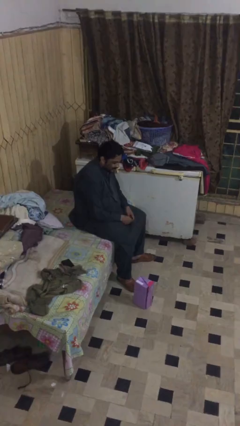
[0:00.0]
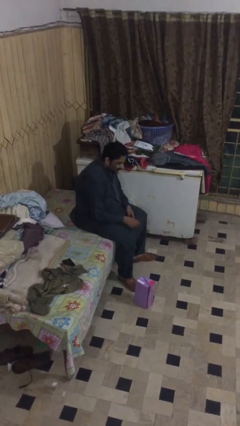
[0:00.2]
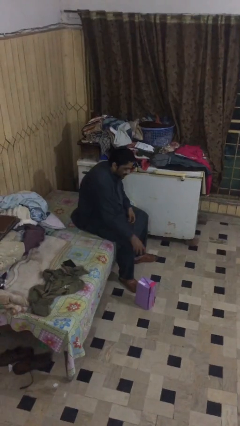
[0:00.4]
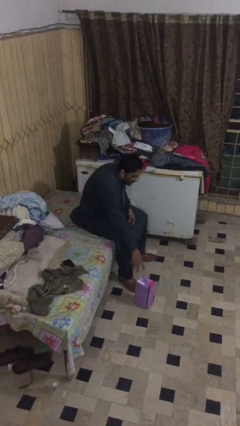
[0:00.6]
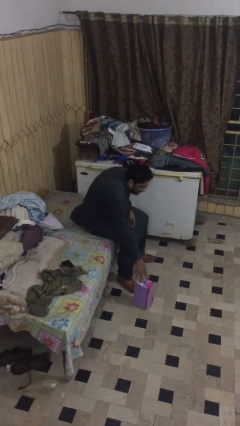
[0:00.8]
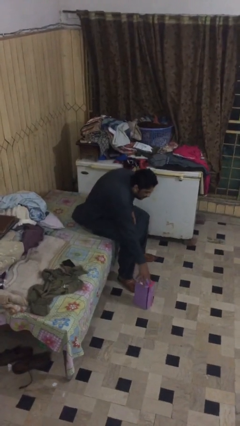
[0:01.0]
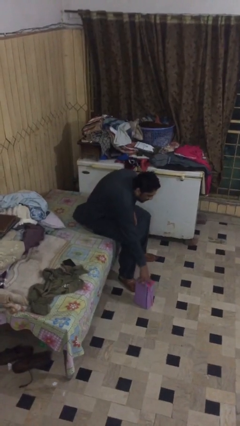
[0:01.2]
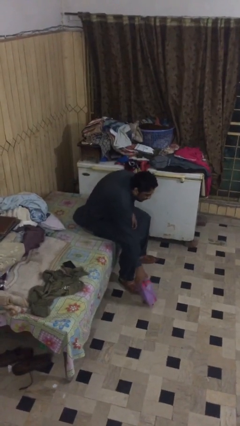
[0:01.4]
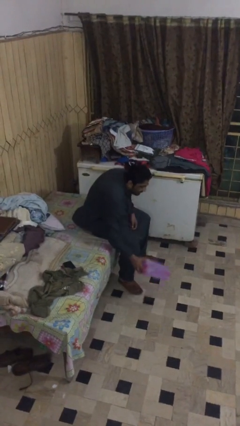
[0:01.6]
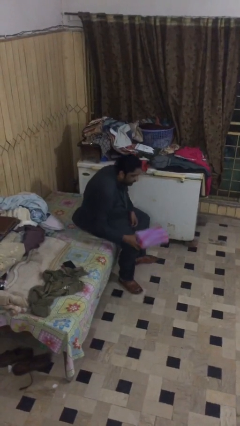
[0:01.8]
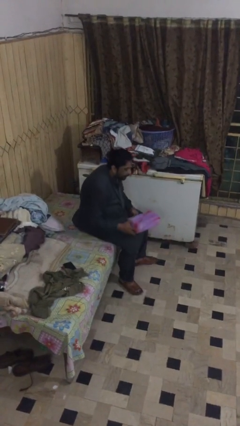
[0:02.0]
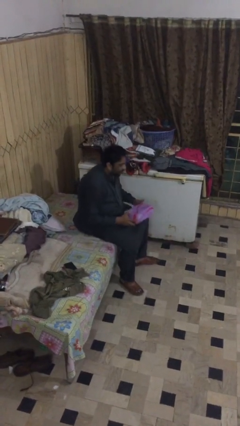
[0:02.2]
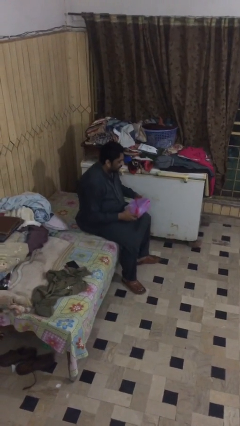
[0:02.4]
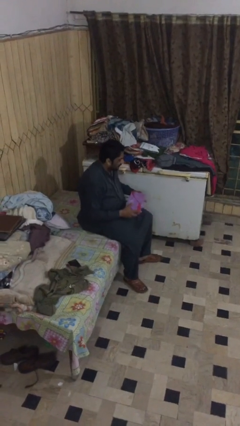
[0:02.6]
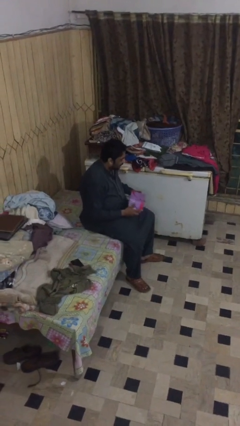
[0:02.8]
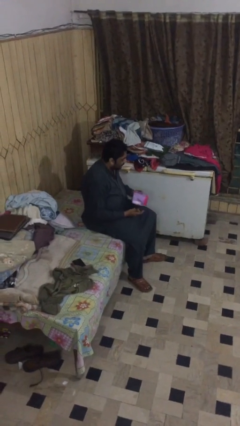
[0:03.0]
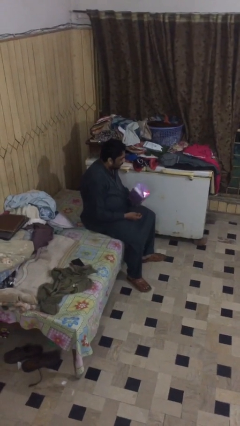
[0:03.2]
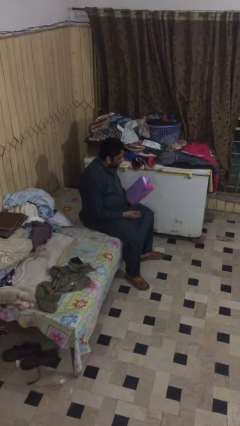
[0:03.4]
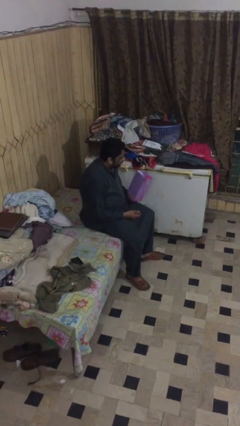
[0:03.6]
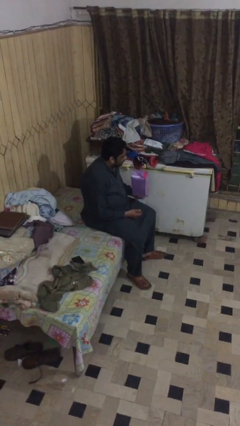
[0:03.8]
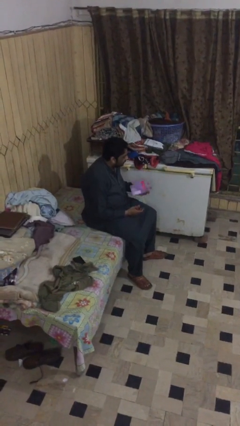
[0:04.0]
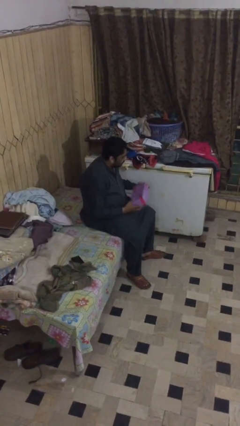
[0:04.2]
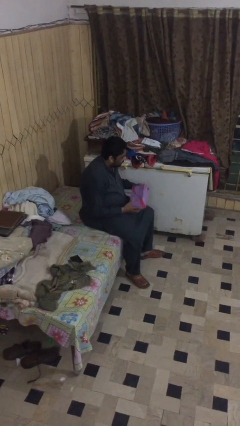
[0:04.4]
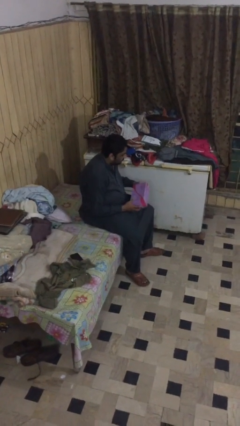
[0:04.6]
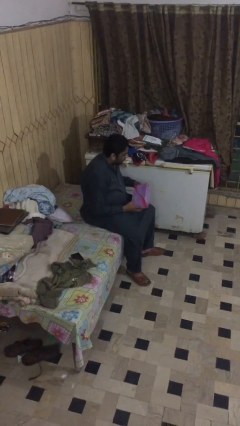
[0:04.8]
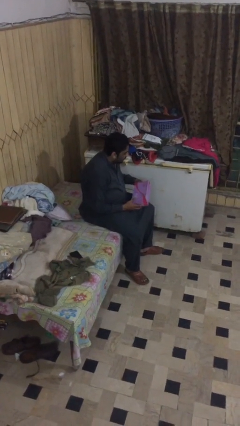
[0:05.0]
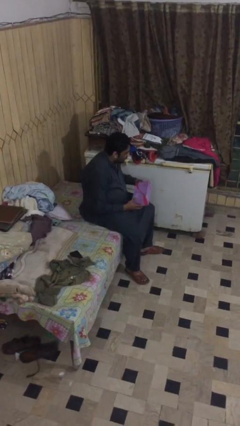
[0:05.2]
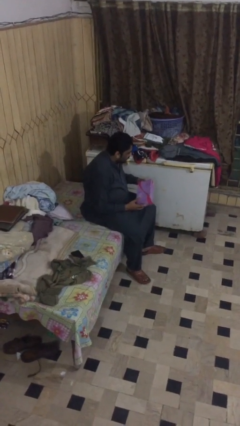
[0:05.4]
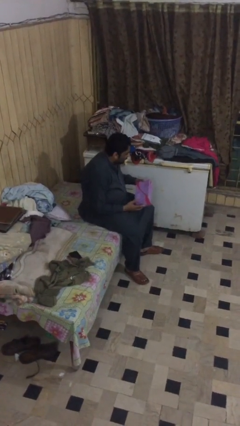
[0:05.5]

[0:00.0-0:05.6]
person picks up object from floor

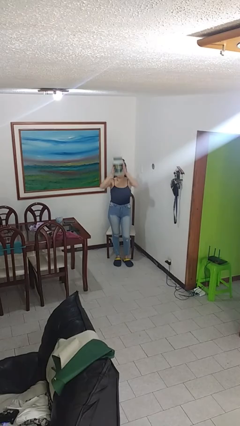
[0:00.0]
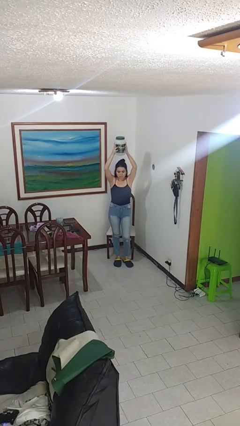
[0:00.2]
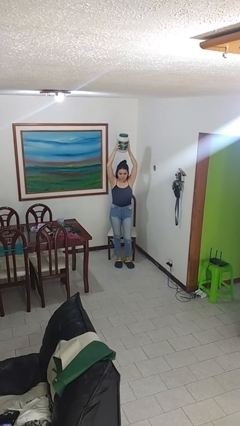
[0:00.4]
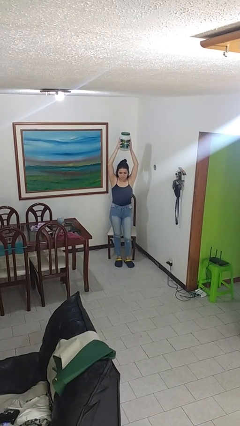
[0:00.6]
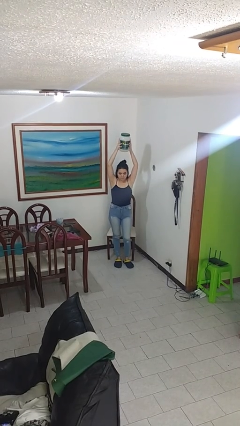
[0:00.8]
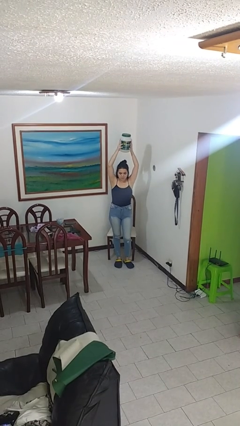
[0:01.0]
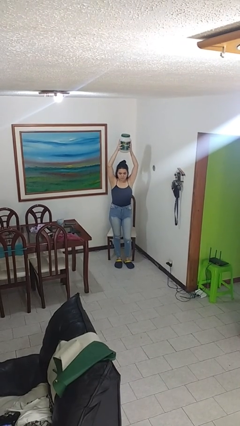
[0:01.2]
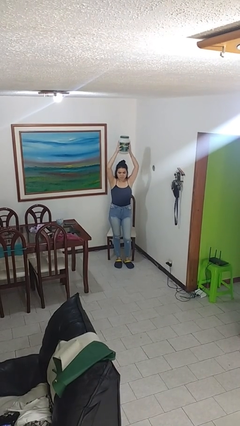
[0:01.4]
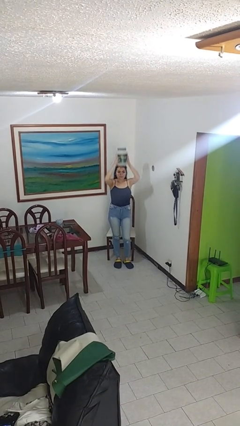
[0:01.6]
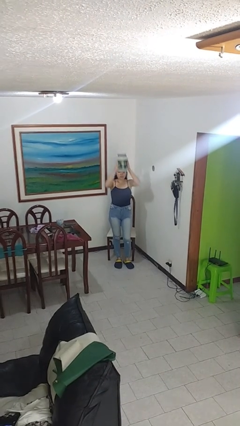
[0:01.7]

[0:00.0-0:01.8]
person holds object above head

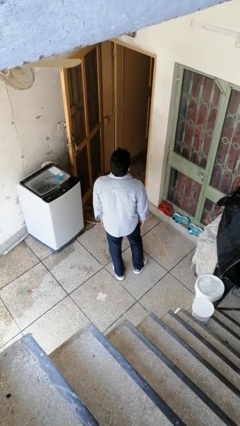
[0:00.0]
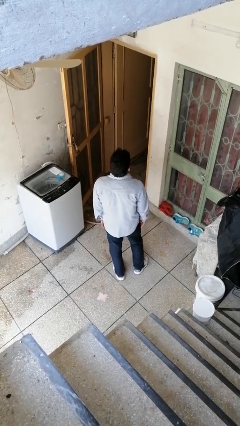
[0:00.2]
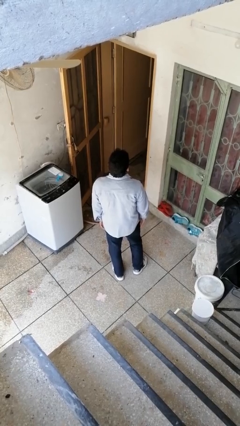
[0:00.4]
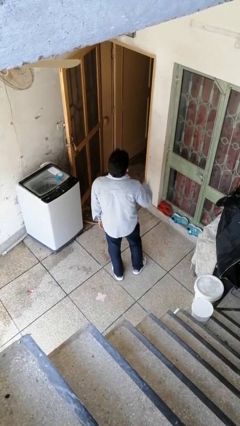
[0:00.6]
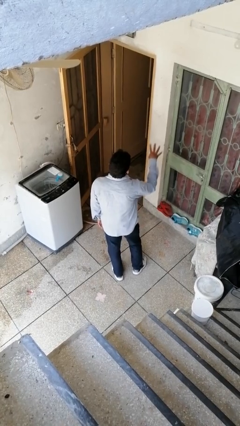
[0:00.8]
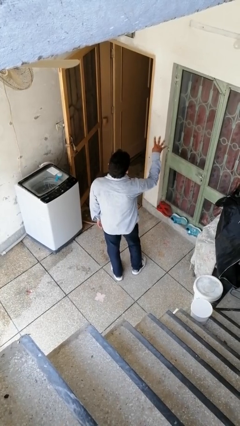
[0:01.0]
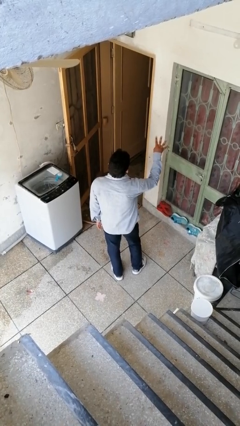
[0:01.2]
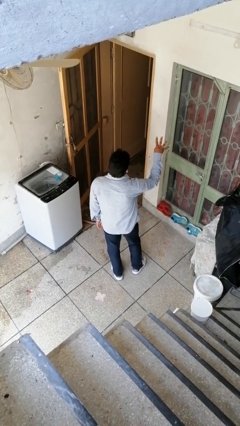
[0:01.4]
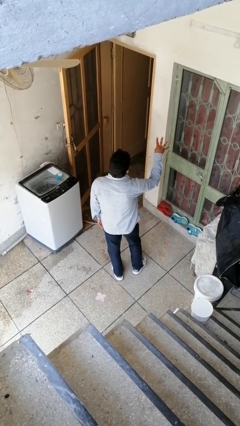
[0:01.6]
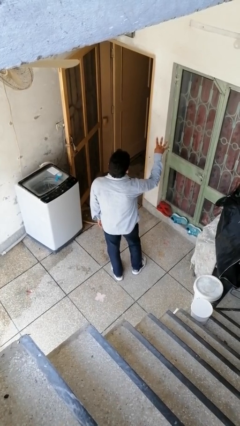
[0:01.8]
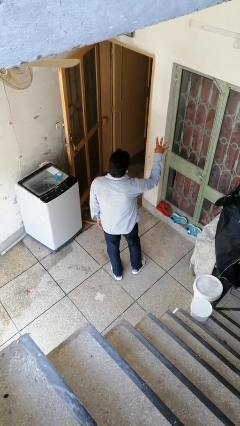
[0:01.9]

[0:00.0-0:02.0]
person gestures number four

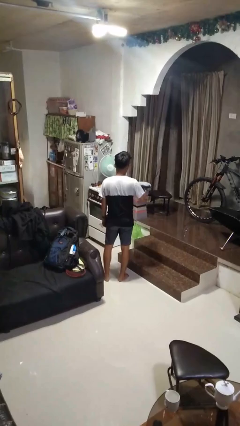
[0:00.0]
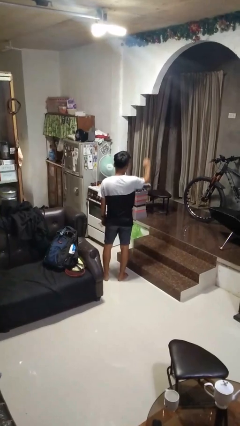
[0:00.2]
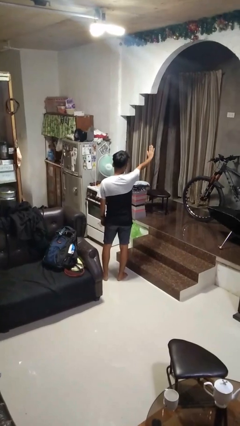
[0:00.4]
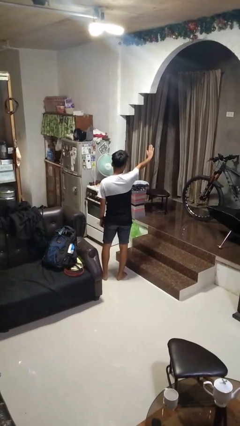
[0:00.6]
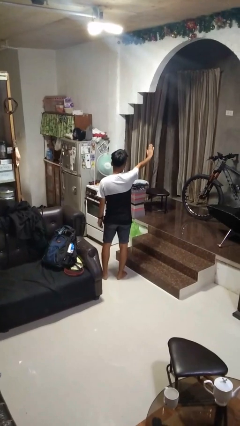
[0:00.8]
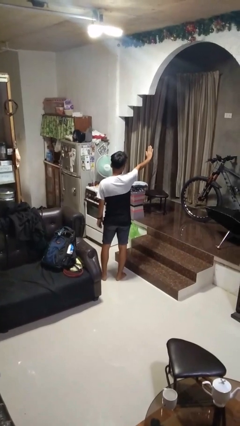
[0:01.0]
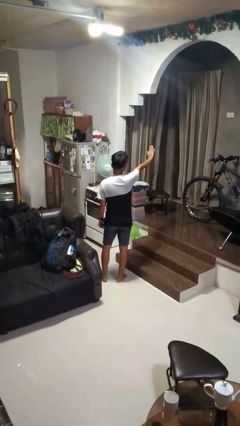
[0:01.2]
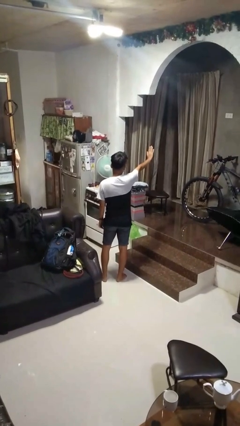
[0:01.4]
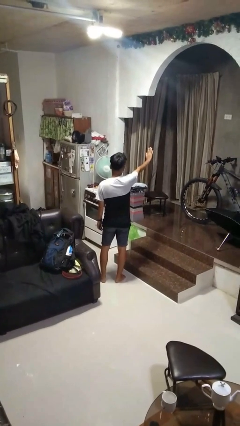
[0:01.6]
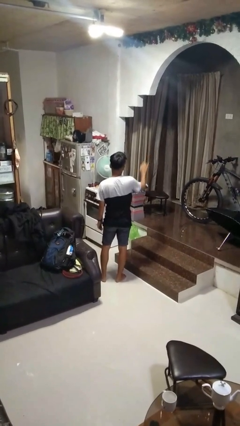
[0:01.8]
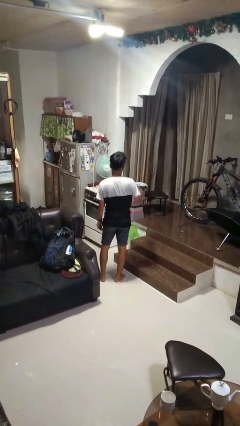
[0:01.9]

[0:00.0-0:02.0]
person gestures stop

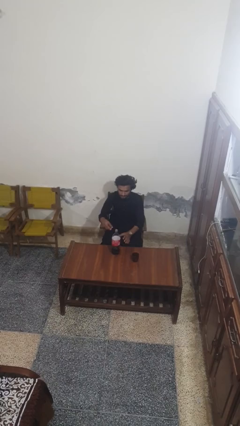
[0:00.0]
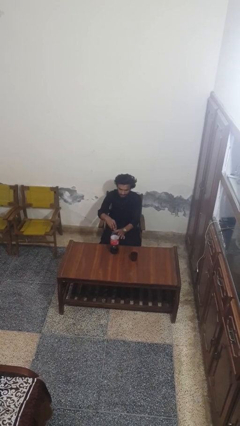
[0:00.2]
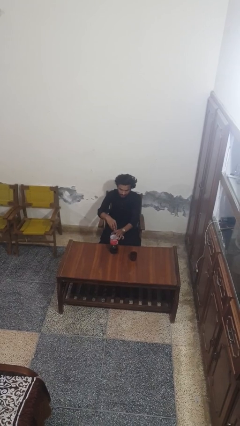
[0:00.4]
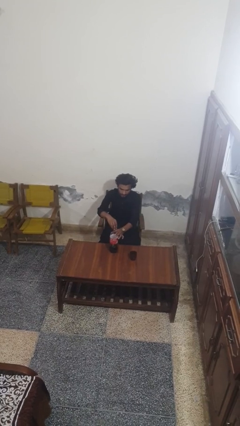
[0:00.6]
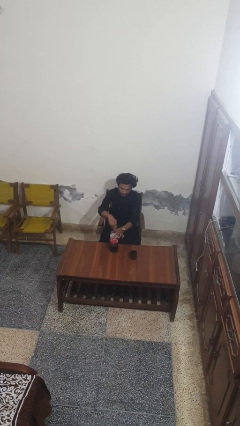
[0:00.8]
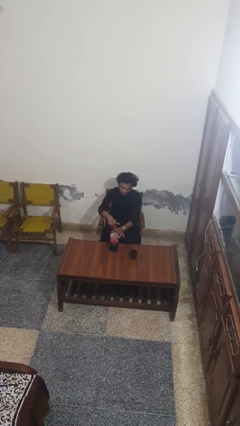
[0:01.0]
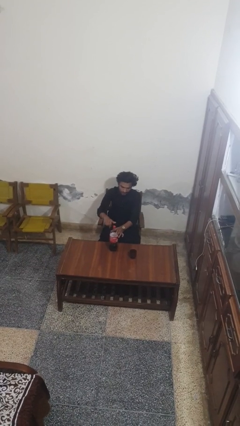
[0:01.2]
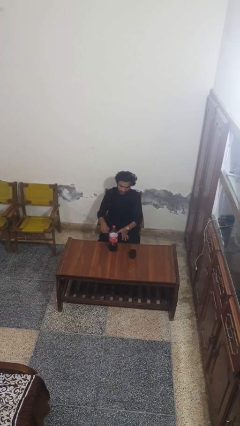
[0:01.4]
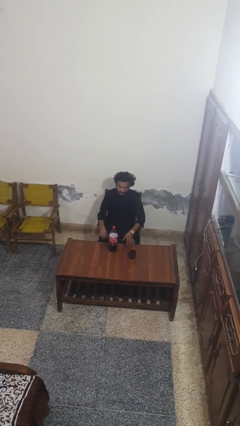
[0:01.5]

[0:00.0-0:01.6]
person screws lid to bottle

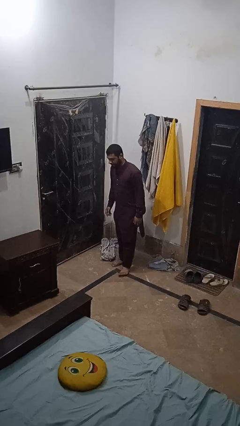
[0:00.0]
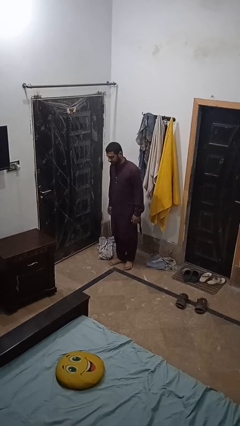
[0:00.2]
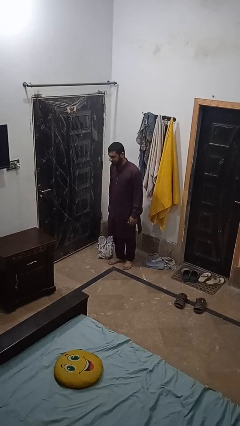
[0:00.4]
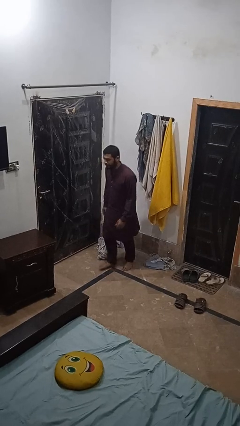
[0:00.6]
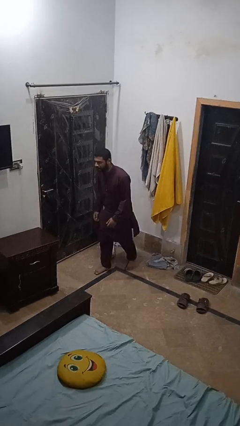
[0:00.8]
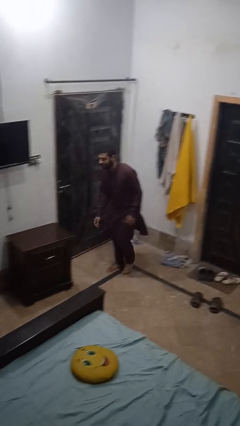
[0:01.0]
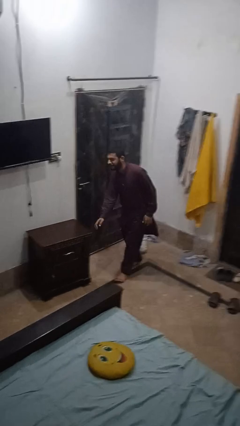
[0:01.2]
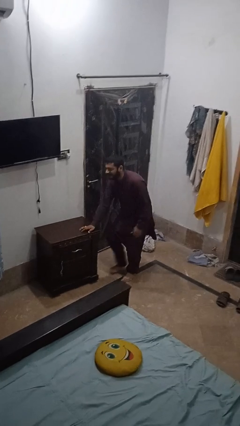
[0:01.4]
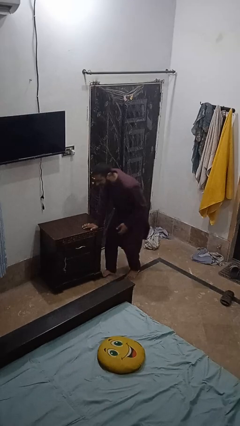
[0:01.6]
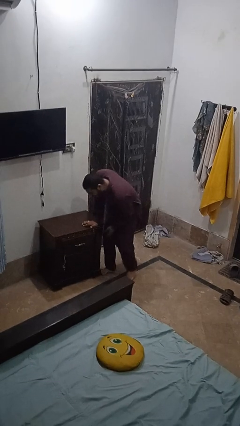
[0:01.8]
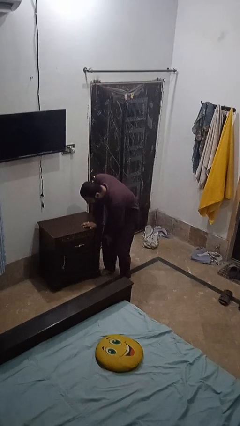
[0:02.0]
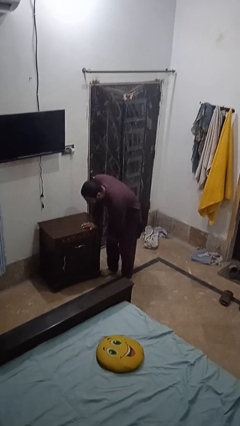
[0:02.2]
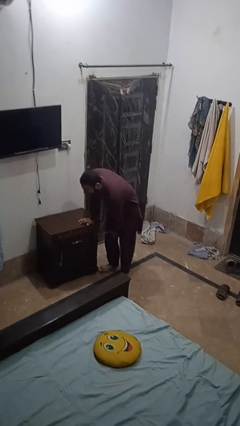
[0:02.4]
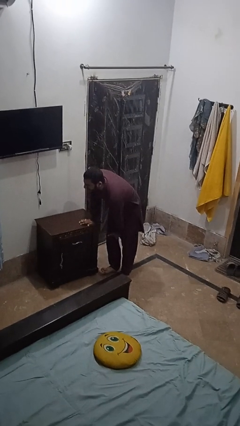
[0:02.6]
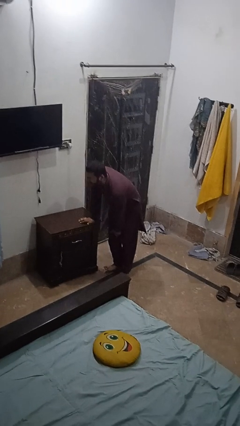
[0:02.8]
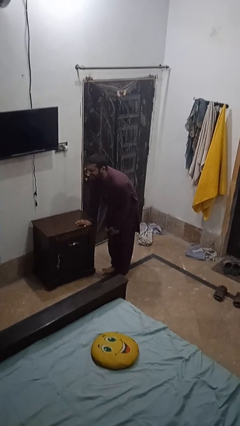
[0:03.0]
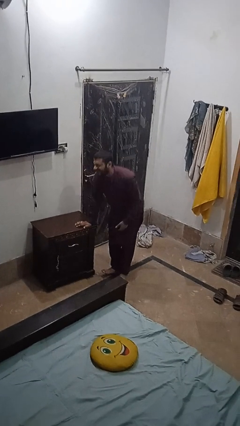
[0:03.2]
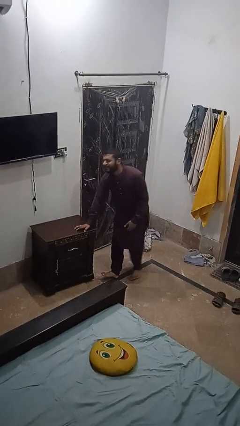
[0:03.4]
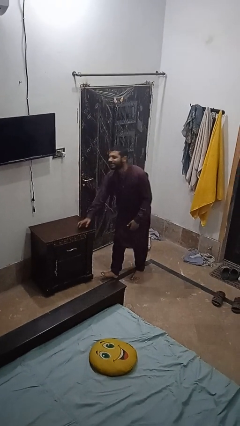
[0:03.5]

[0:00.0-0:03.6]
person stubs toe

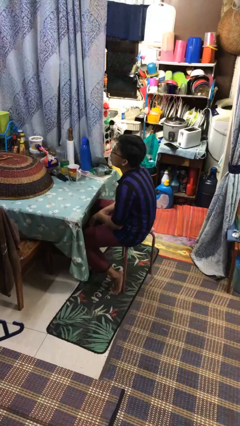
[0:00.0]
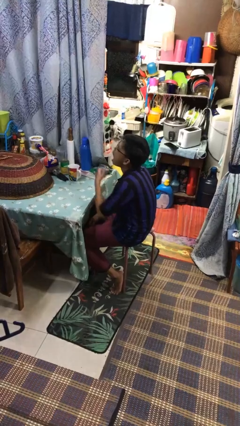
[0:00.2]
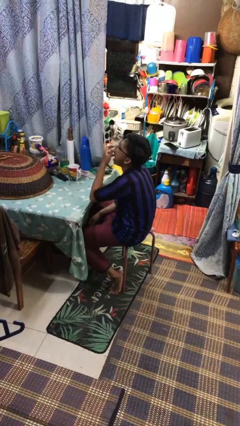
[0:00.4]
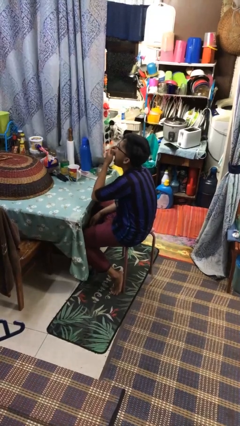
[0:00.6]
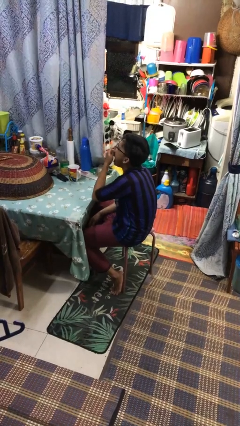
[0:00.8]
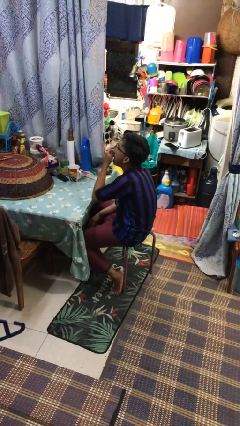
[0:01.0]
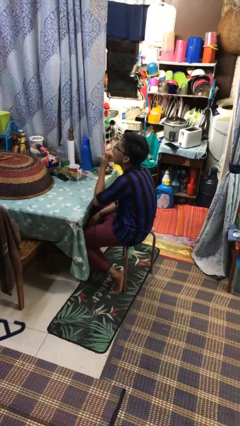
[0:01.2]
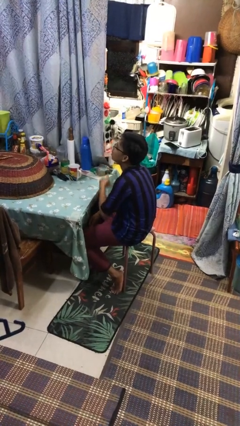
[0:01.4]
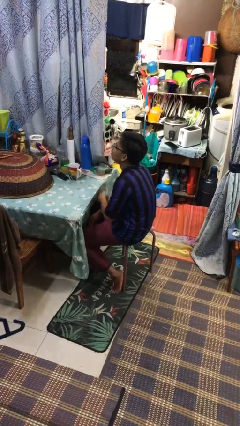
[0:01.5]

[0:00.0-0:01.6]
person yawns
